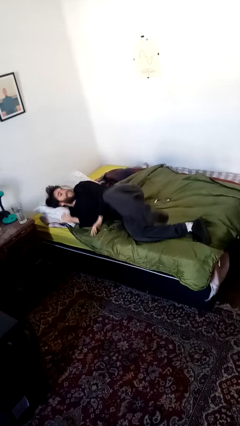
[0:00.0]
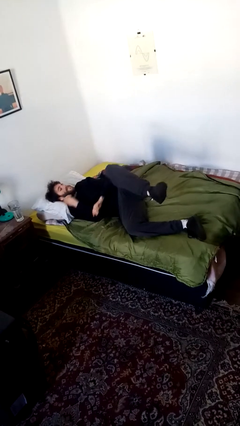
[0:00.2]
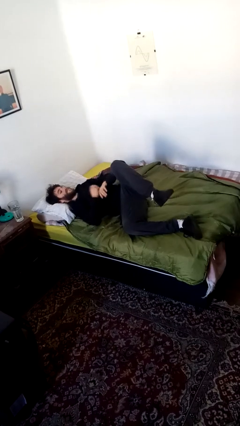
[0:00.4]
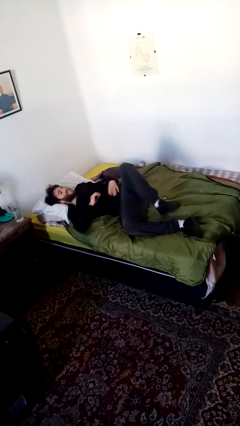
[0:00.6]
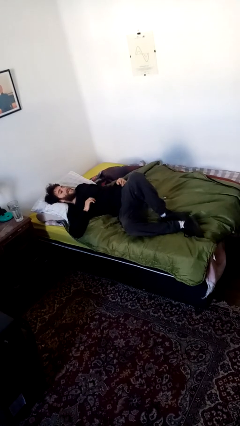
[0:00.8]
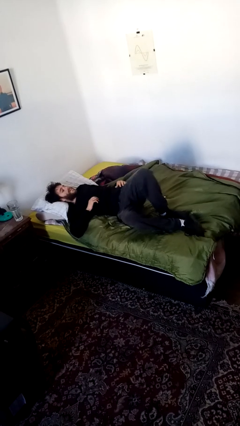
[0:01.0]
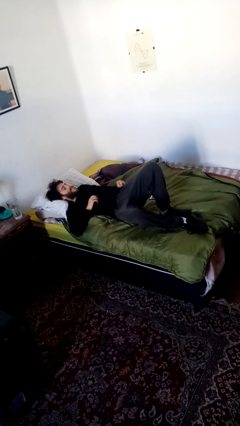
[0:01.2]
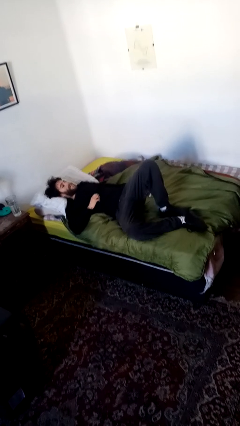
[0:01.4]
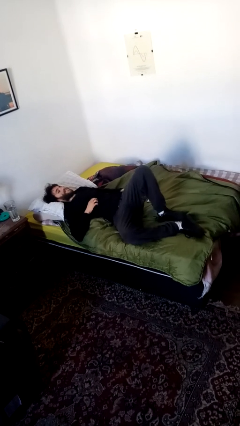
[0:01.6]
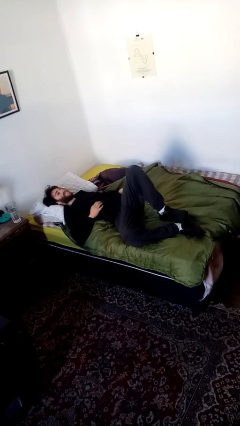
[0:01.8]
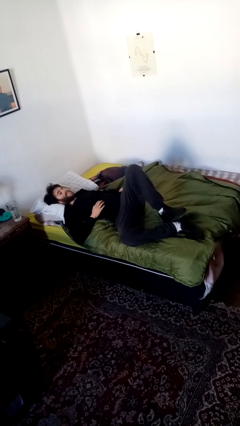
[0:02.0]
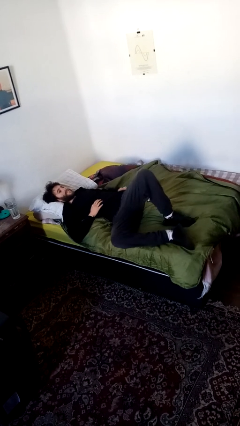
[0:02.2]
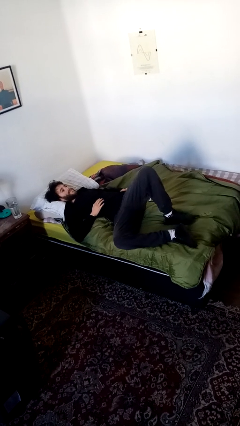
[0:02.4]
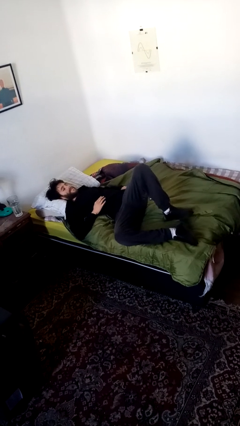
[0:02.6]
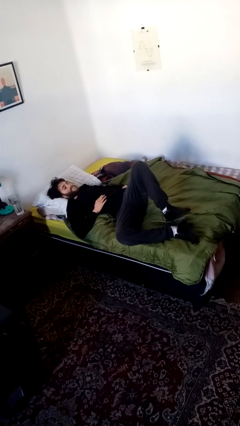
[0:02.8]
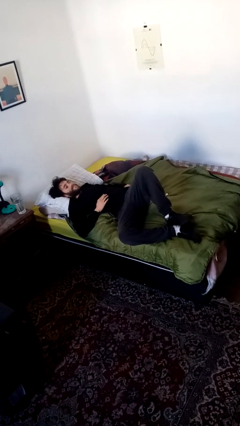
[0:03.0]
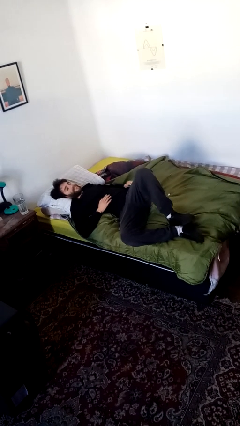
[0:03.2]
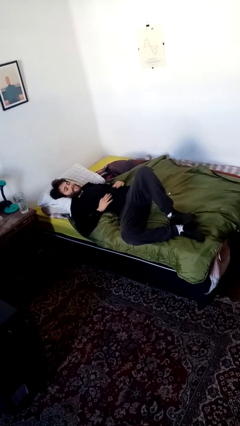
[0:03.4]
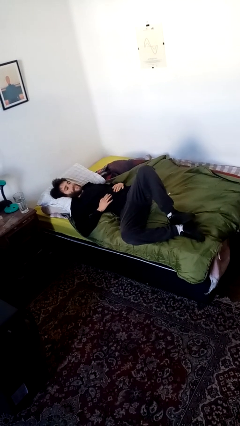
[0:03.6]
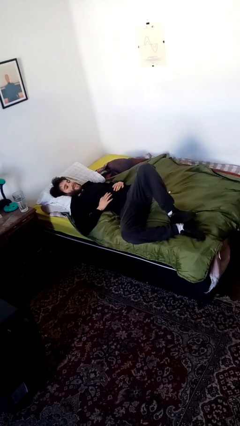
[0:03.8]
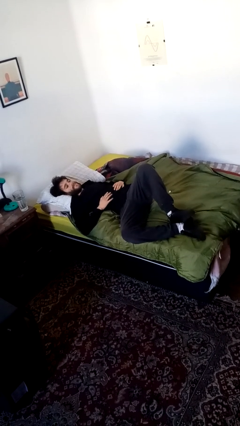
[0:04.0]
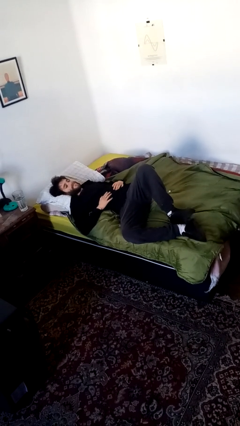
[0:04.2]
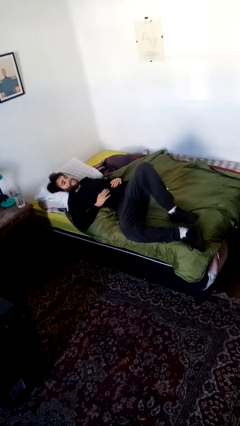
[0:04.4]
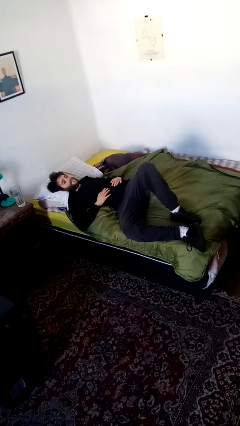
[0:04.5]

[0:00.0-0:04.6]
person sits down

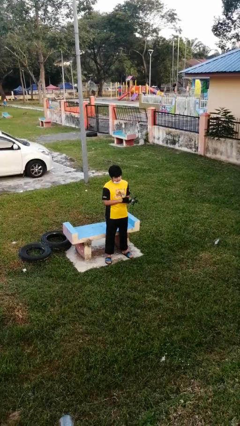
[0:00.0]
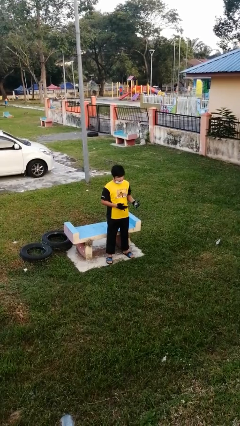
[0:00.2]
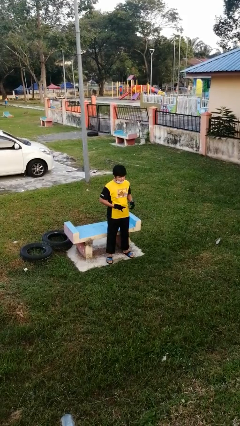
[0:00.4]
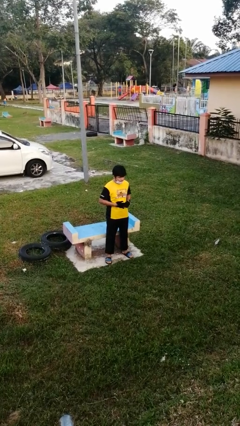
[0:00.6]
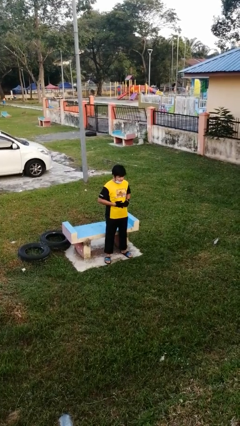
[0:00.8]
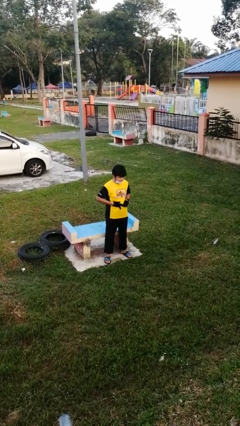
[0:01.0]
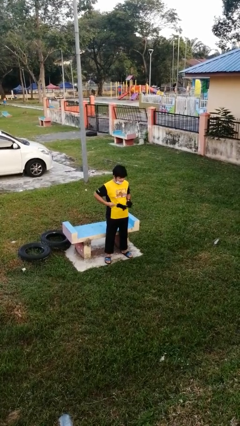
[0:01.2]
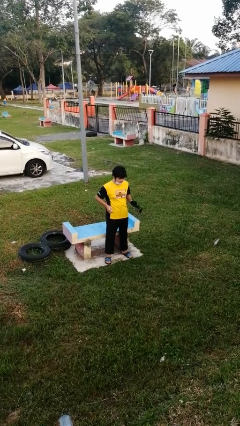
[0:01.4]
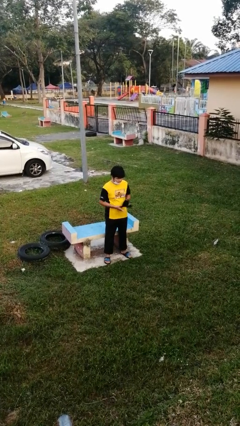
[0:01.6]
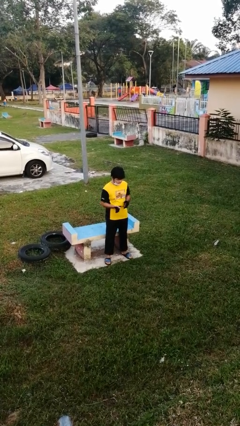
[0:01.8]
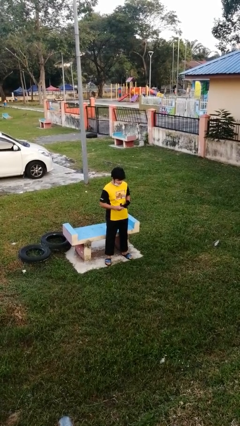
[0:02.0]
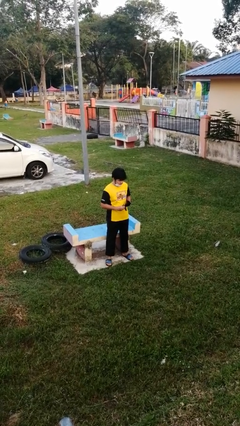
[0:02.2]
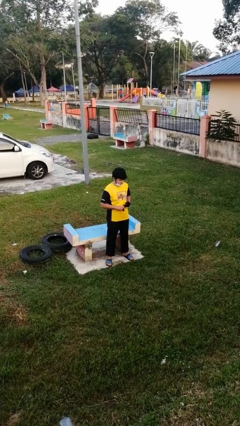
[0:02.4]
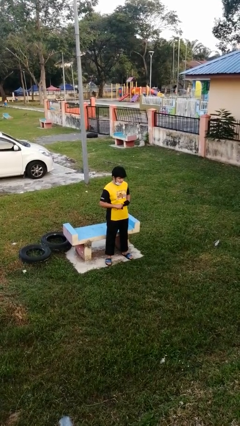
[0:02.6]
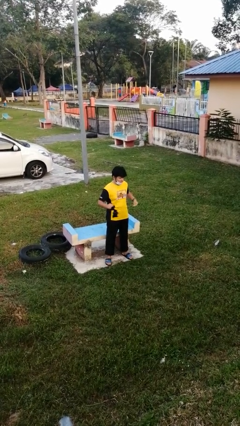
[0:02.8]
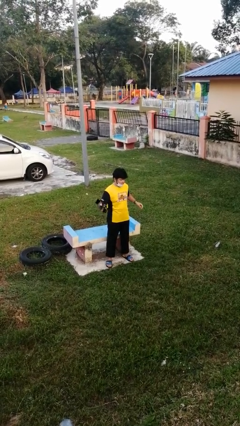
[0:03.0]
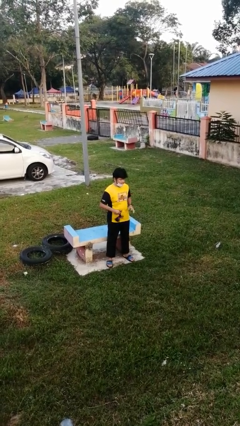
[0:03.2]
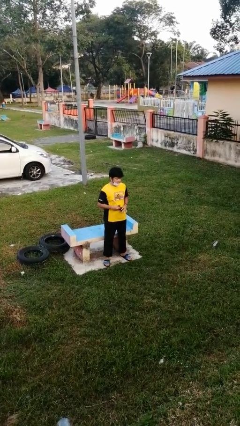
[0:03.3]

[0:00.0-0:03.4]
person takes off gloves

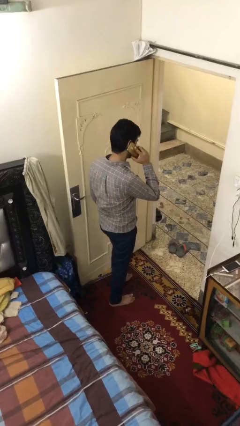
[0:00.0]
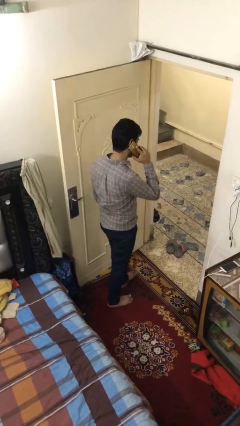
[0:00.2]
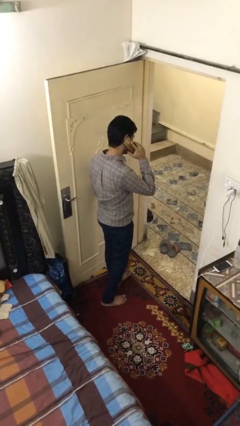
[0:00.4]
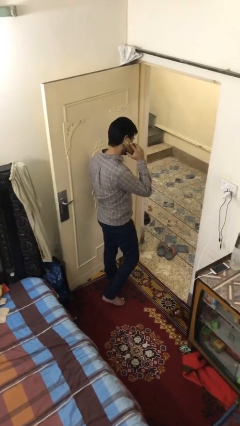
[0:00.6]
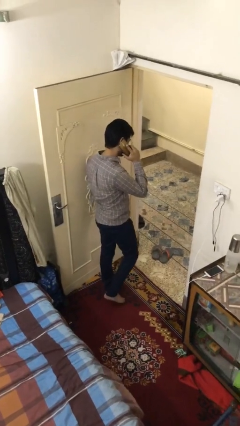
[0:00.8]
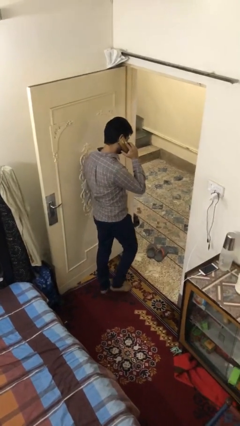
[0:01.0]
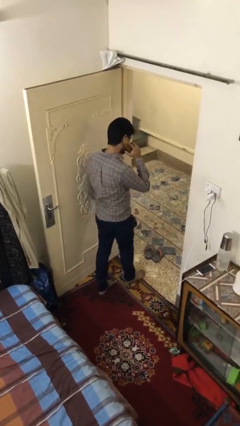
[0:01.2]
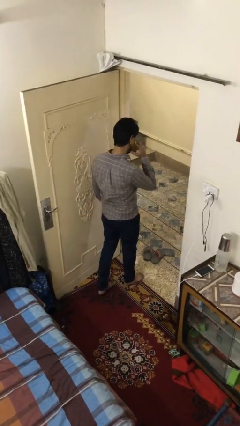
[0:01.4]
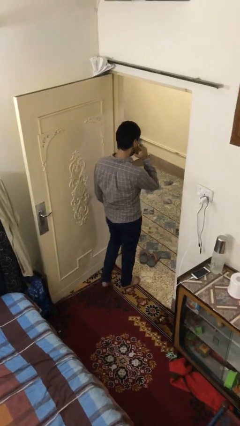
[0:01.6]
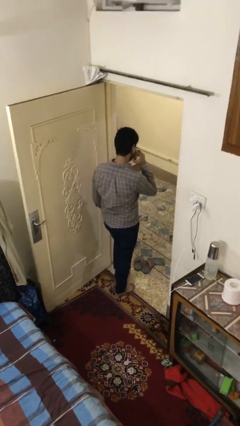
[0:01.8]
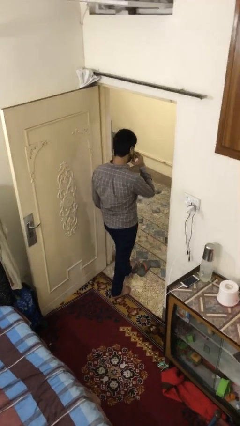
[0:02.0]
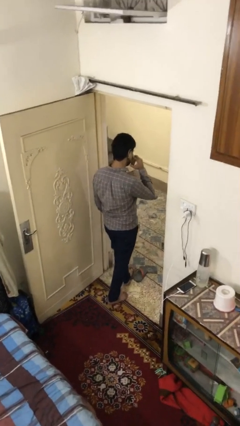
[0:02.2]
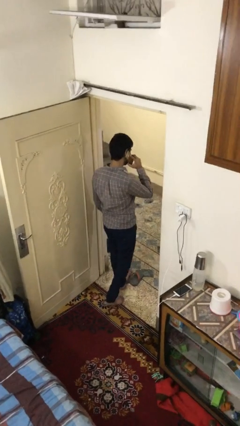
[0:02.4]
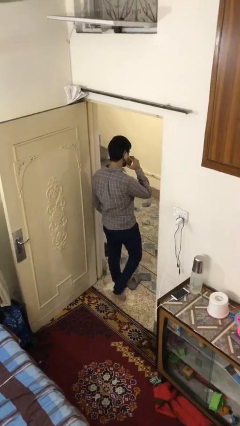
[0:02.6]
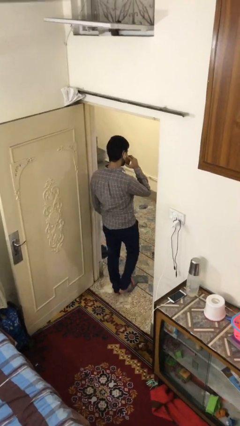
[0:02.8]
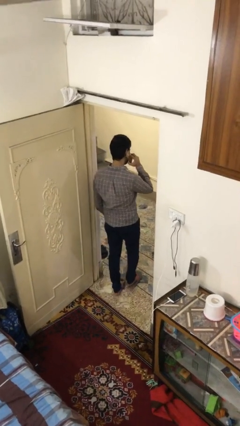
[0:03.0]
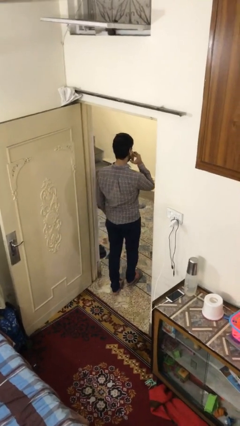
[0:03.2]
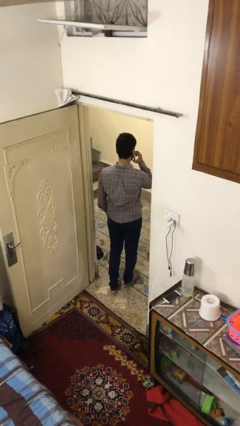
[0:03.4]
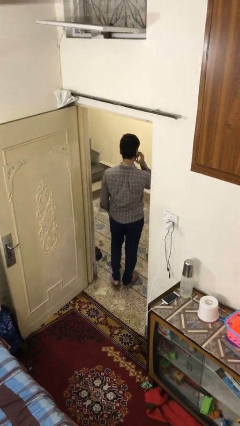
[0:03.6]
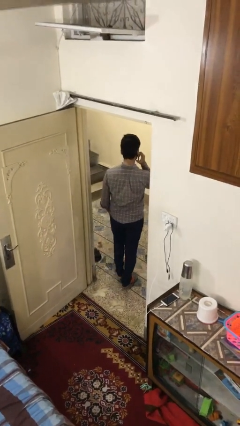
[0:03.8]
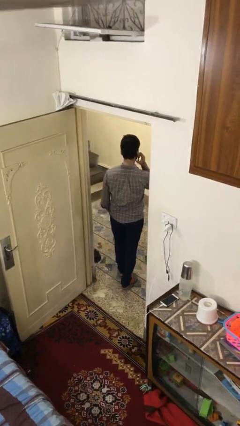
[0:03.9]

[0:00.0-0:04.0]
person exits scene through structure

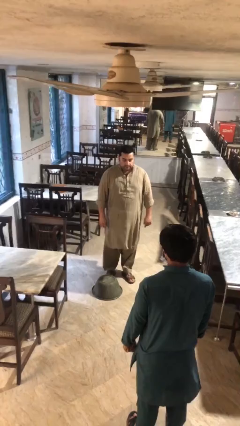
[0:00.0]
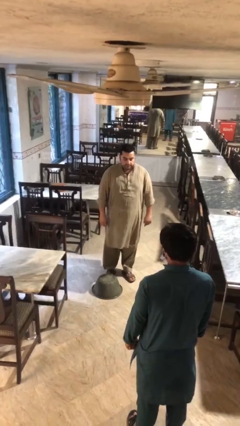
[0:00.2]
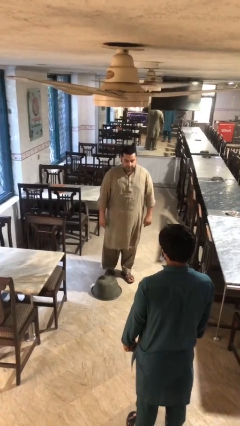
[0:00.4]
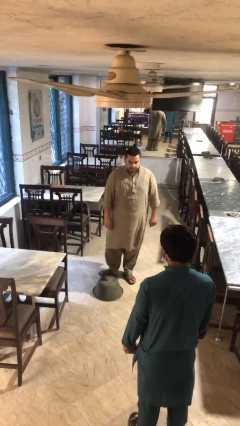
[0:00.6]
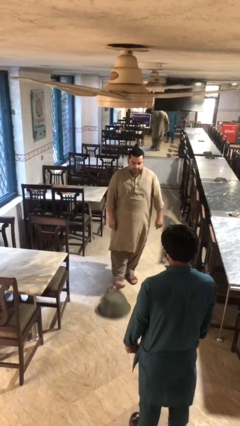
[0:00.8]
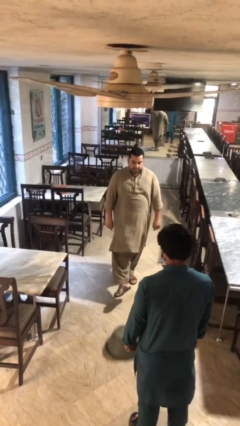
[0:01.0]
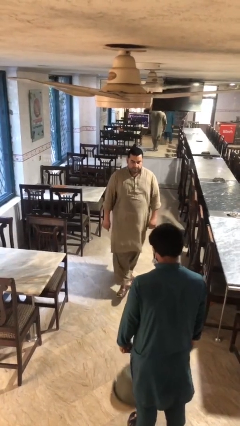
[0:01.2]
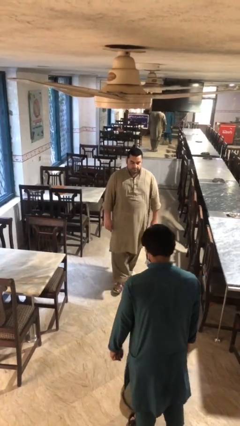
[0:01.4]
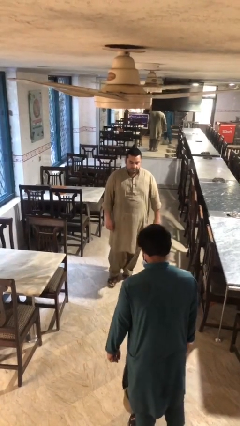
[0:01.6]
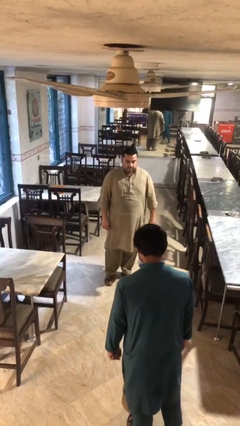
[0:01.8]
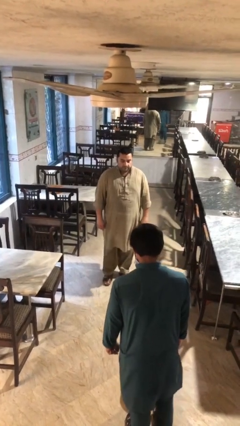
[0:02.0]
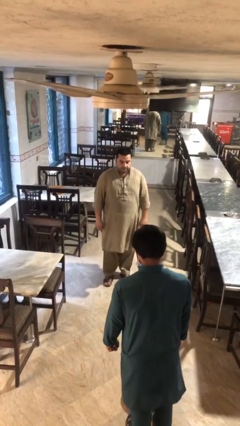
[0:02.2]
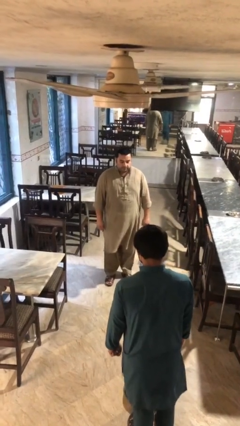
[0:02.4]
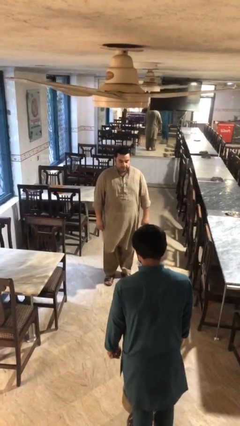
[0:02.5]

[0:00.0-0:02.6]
person kicks object to person

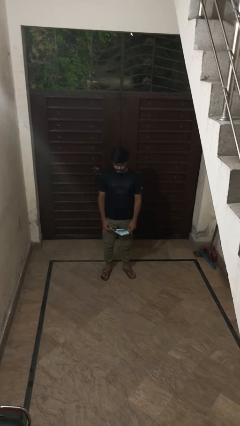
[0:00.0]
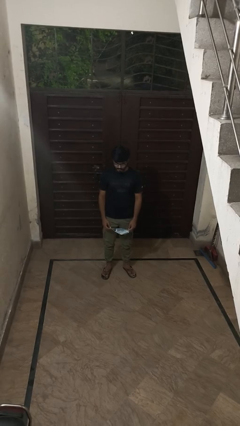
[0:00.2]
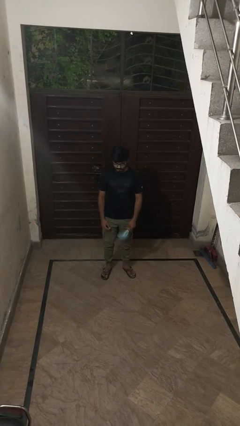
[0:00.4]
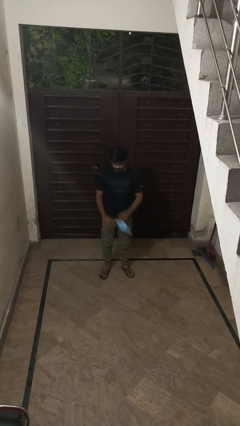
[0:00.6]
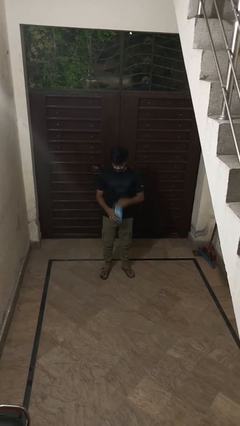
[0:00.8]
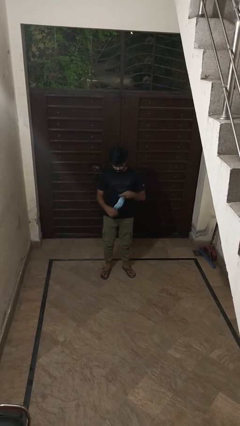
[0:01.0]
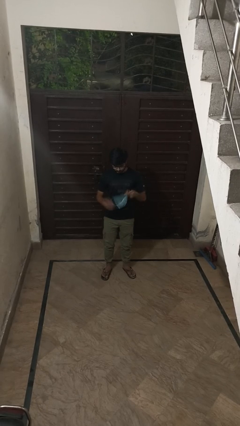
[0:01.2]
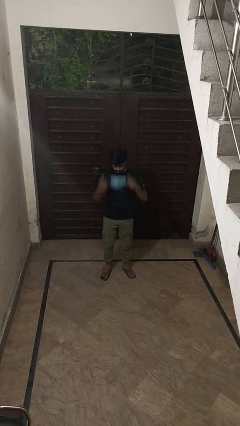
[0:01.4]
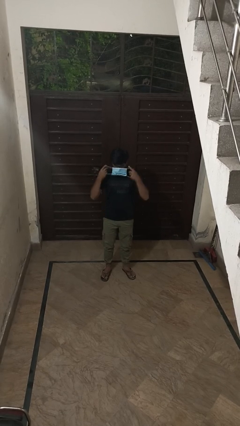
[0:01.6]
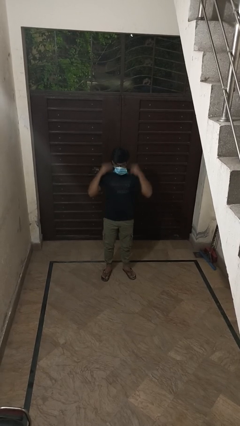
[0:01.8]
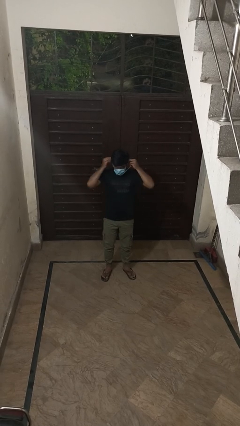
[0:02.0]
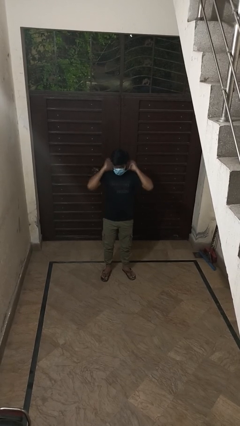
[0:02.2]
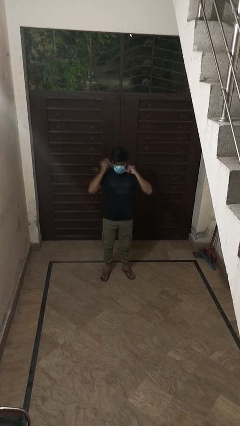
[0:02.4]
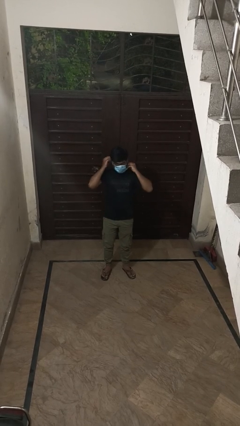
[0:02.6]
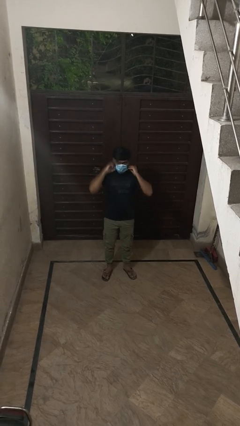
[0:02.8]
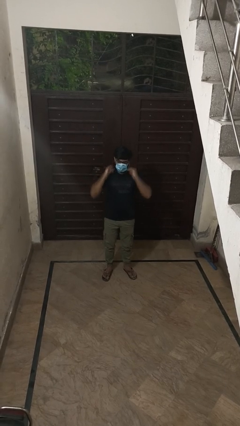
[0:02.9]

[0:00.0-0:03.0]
person puts on facemask
